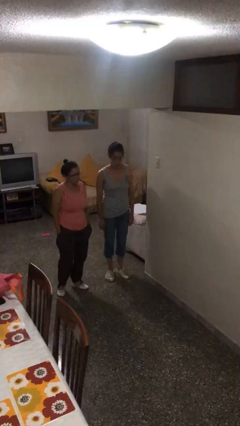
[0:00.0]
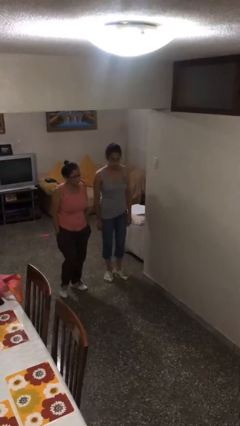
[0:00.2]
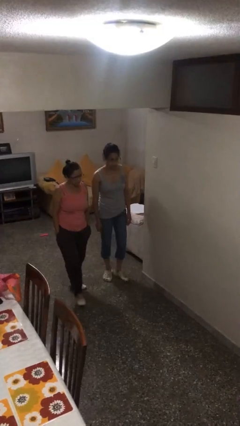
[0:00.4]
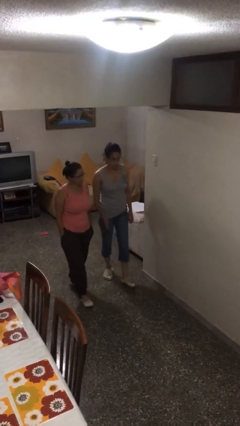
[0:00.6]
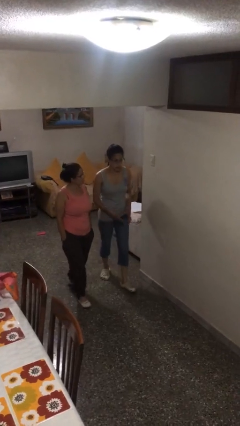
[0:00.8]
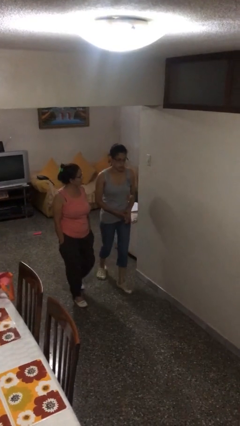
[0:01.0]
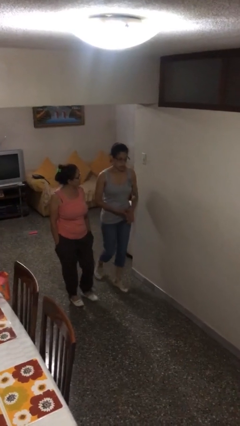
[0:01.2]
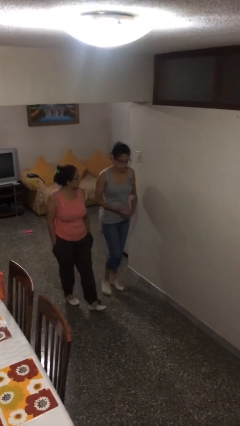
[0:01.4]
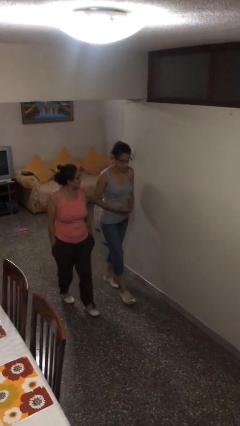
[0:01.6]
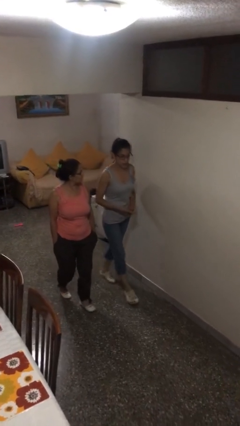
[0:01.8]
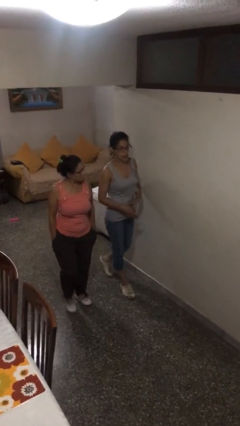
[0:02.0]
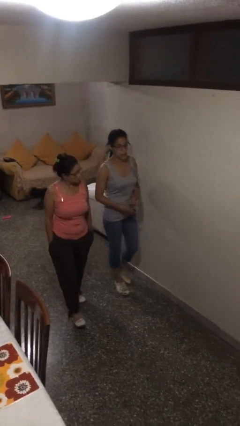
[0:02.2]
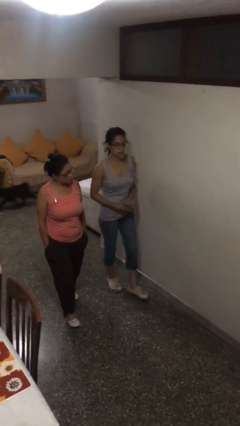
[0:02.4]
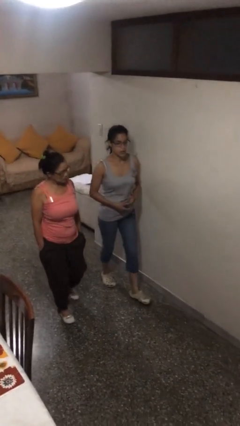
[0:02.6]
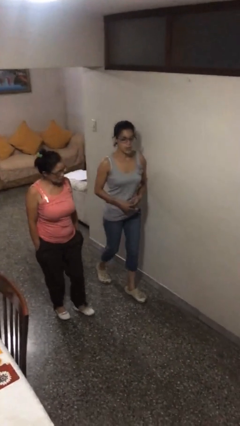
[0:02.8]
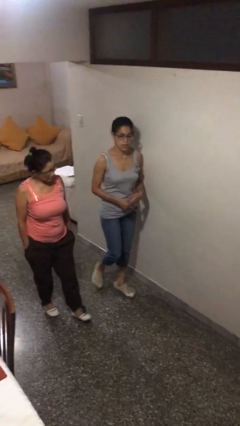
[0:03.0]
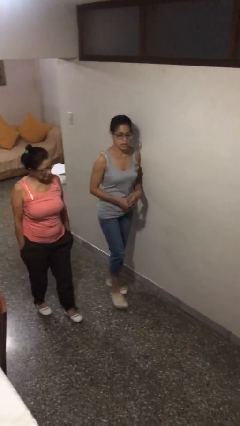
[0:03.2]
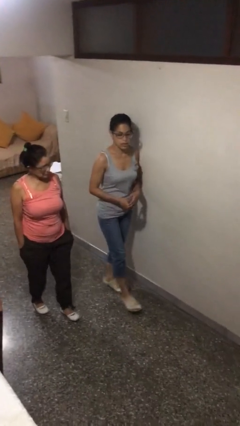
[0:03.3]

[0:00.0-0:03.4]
person talks to person

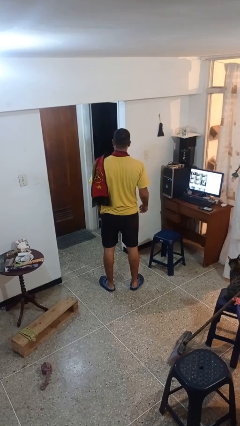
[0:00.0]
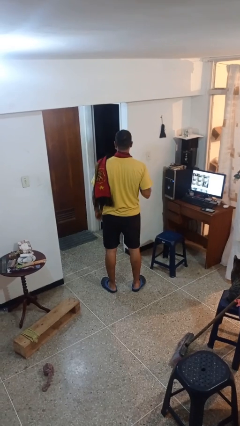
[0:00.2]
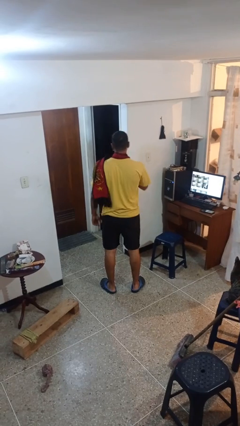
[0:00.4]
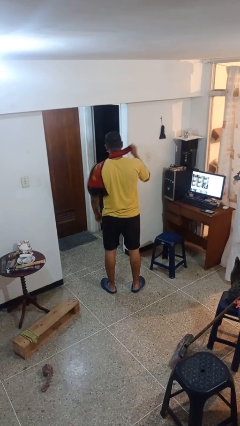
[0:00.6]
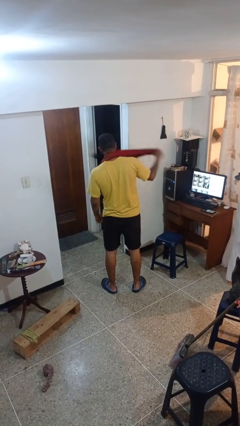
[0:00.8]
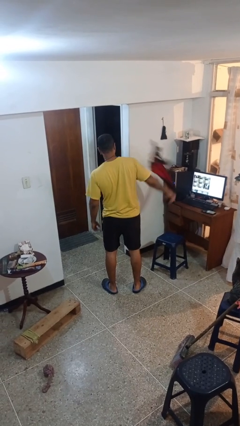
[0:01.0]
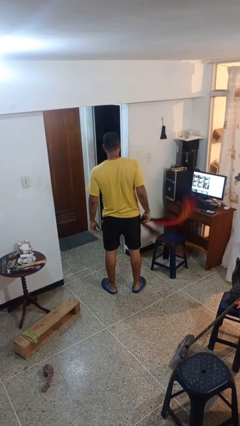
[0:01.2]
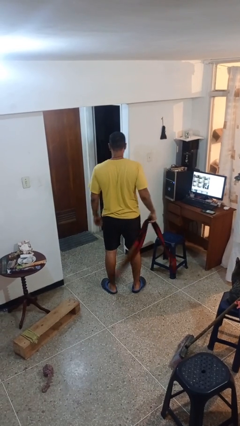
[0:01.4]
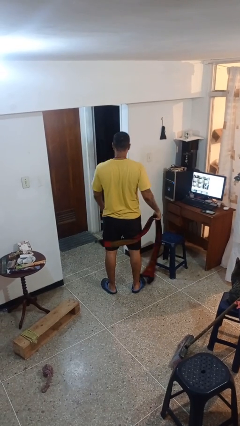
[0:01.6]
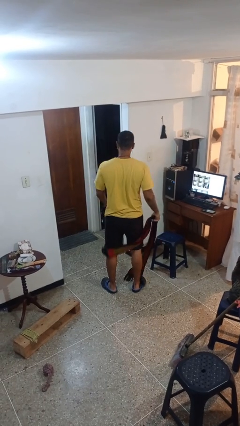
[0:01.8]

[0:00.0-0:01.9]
person takes off scarf

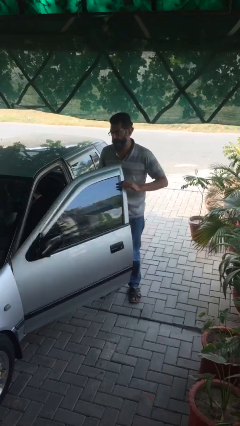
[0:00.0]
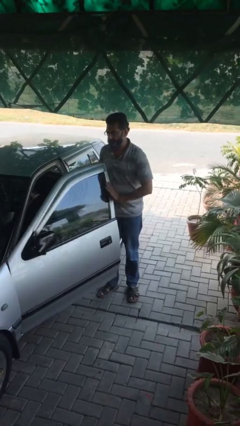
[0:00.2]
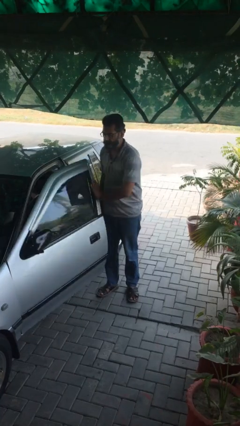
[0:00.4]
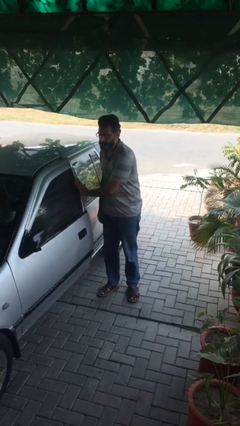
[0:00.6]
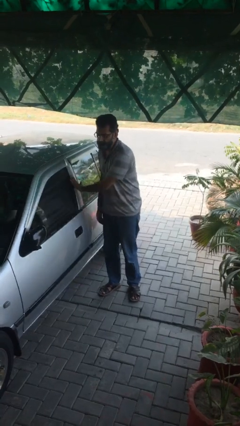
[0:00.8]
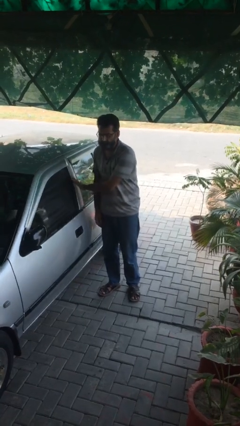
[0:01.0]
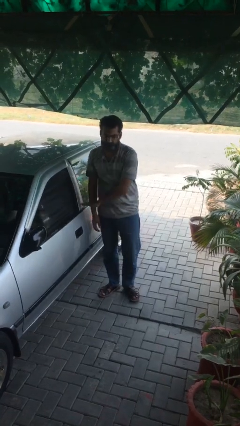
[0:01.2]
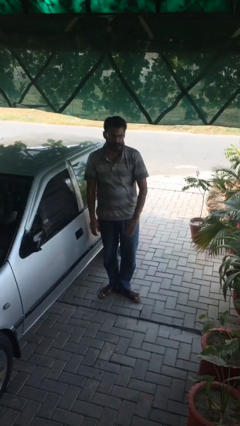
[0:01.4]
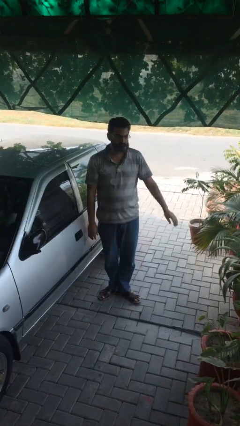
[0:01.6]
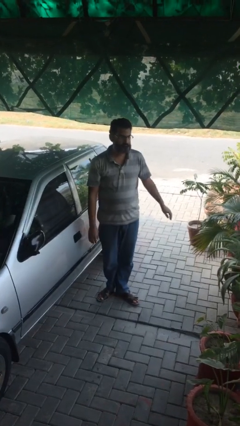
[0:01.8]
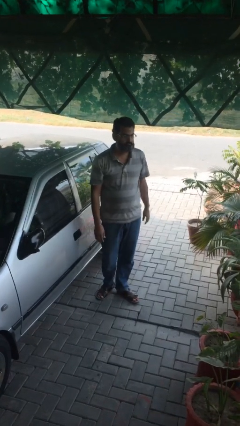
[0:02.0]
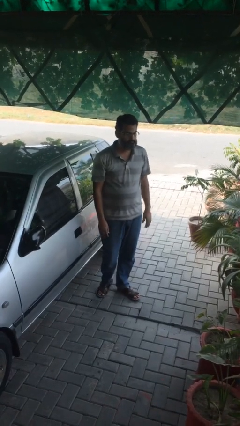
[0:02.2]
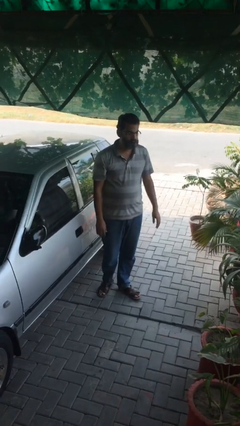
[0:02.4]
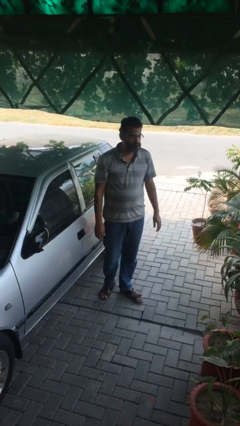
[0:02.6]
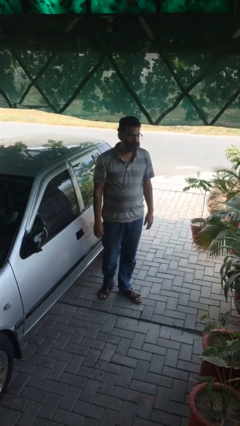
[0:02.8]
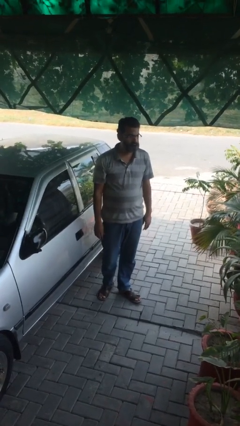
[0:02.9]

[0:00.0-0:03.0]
person closes car door

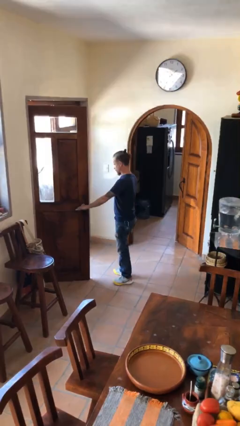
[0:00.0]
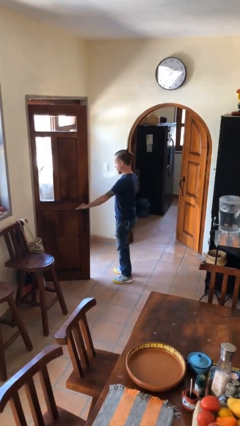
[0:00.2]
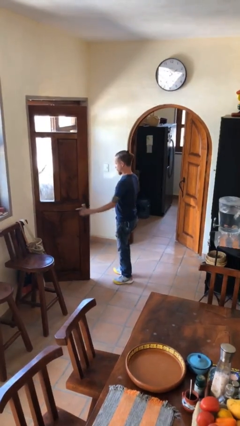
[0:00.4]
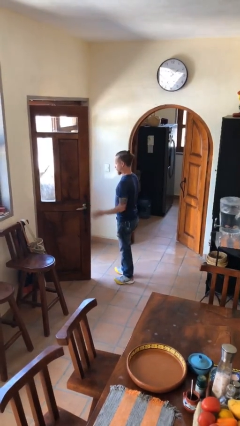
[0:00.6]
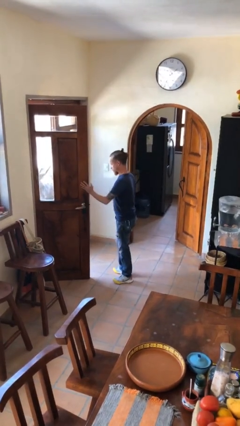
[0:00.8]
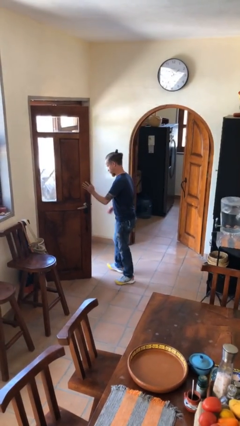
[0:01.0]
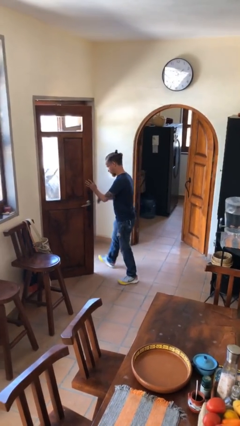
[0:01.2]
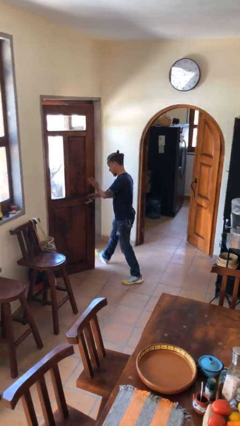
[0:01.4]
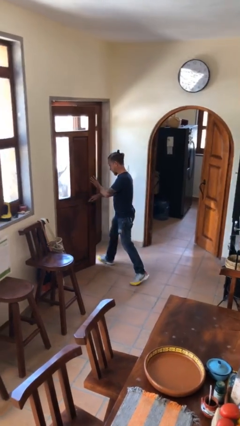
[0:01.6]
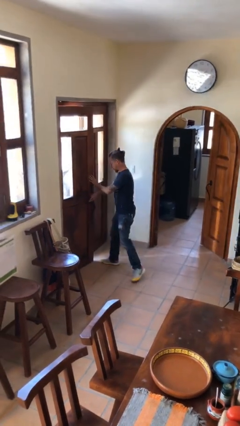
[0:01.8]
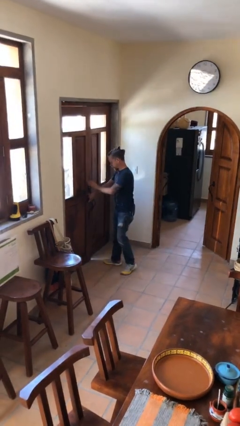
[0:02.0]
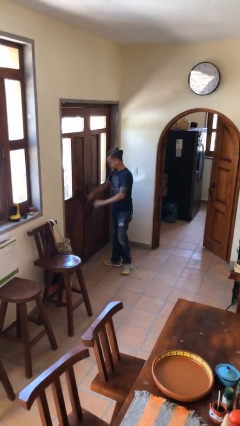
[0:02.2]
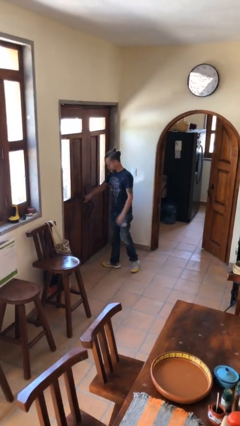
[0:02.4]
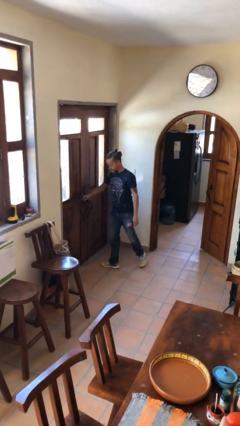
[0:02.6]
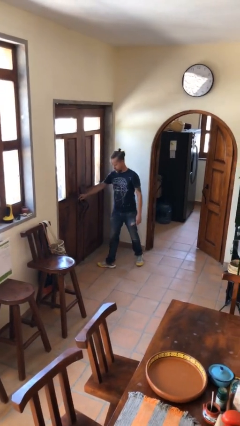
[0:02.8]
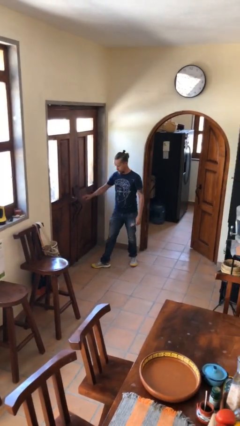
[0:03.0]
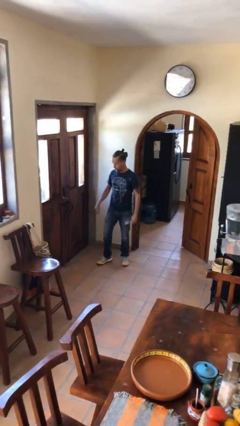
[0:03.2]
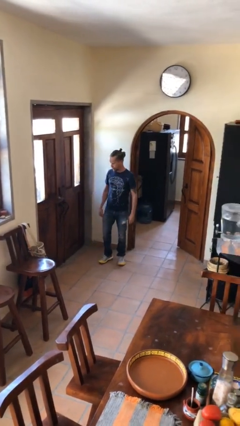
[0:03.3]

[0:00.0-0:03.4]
person closes facility door

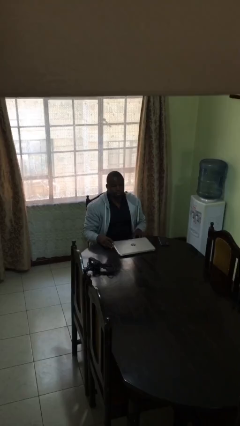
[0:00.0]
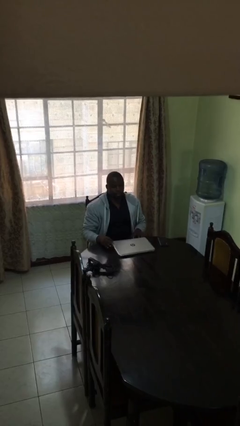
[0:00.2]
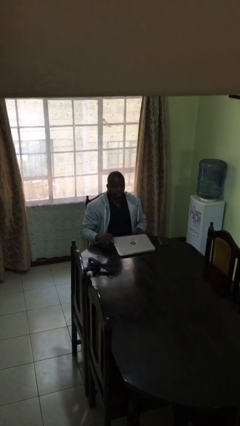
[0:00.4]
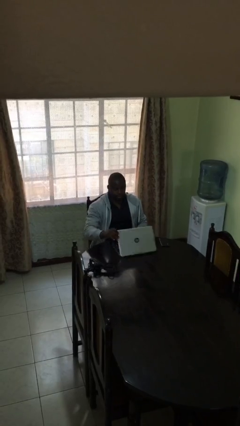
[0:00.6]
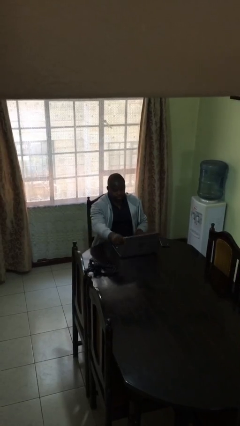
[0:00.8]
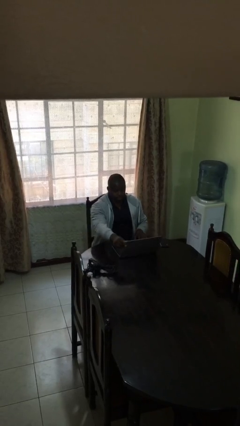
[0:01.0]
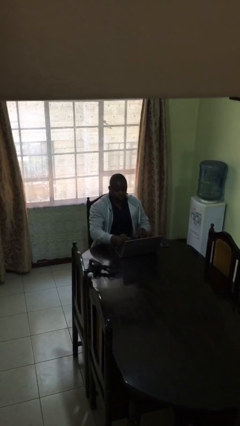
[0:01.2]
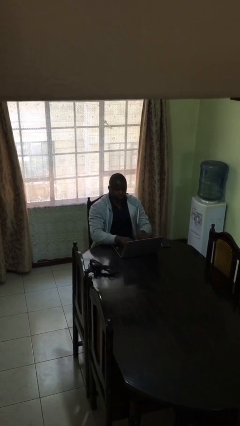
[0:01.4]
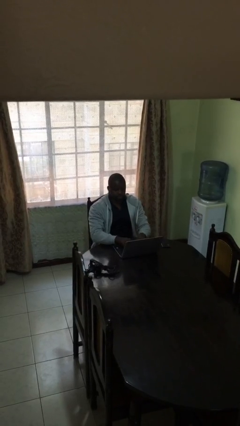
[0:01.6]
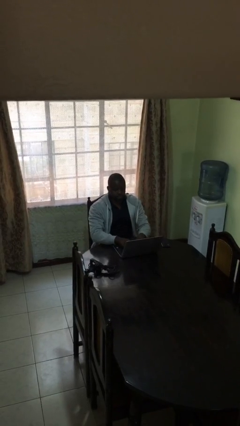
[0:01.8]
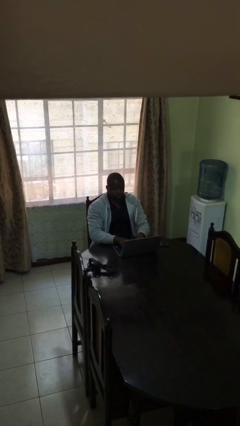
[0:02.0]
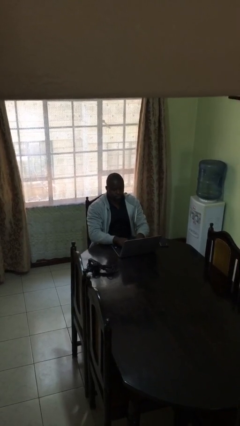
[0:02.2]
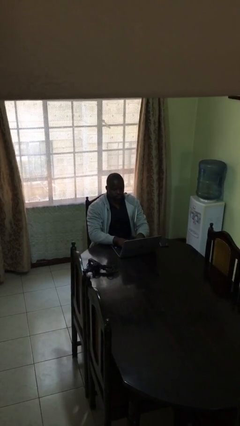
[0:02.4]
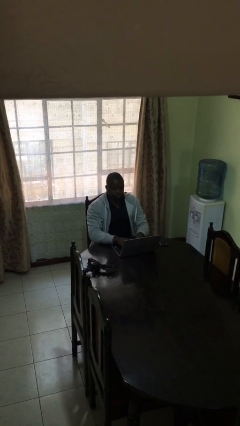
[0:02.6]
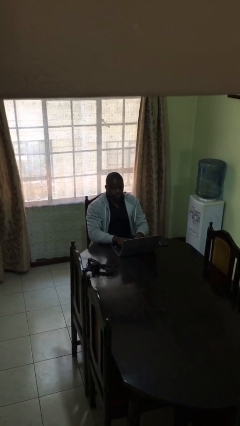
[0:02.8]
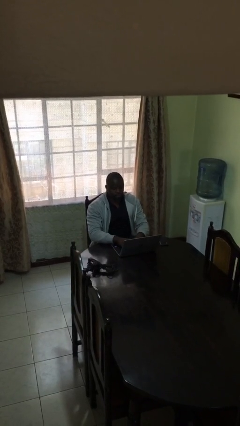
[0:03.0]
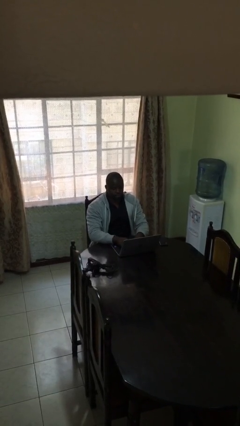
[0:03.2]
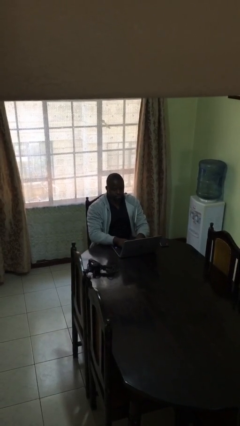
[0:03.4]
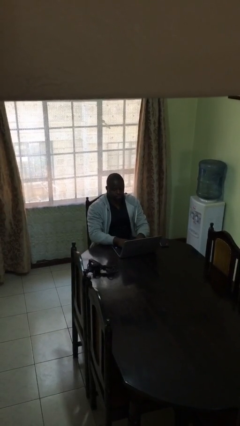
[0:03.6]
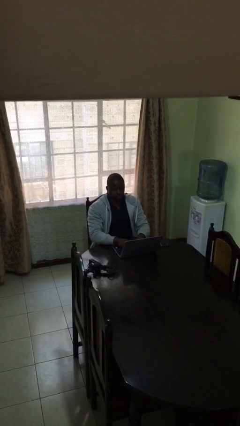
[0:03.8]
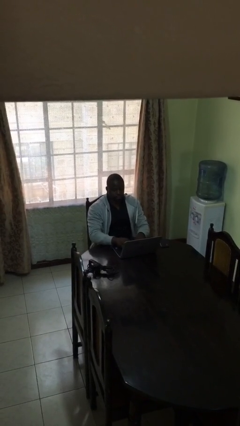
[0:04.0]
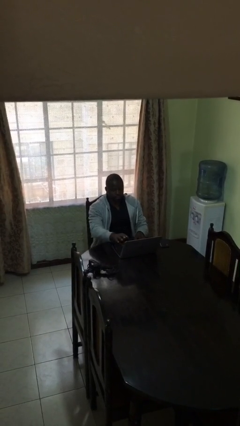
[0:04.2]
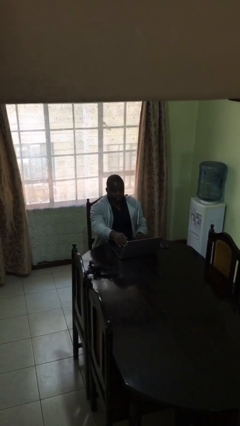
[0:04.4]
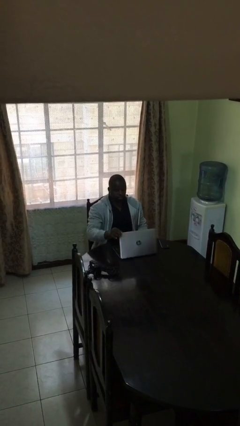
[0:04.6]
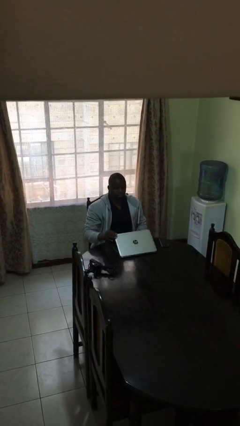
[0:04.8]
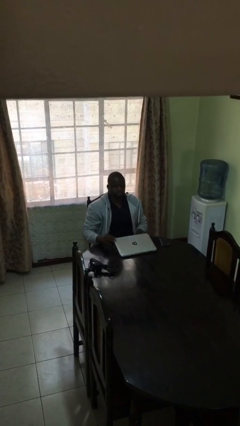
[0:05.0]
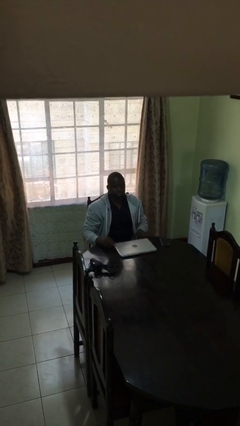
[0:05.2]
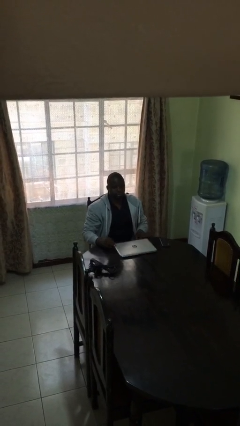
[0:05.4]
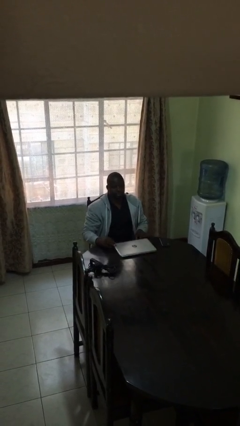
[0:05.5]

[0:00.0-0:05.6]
person interacts with laptop
